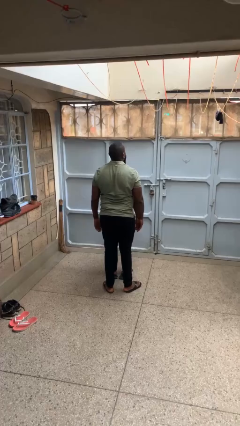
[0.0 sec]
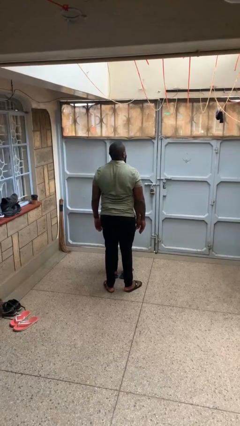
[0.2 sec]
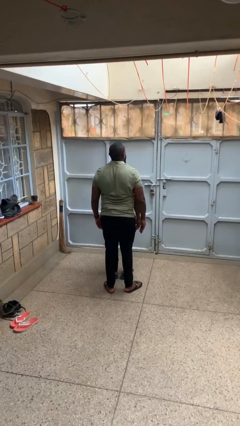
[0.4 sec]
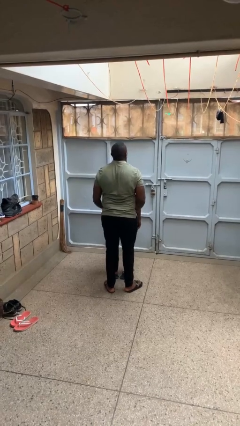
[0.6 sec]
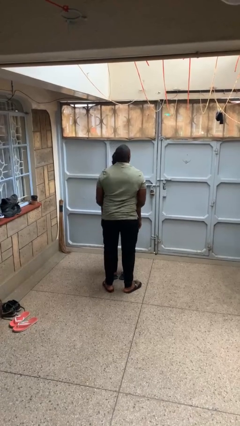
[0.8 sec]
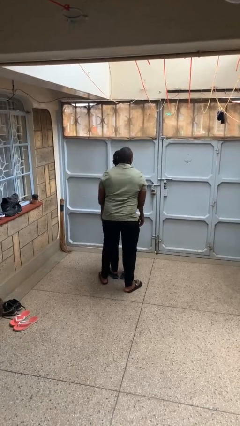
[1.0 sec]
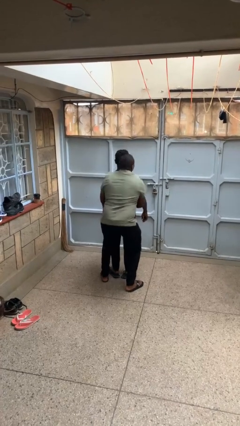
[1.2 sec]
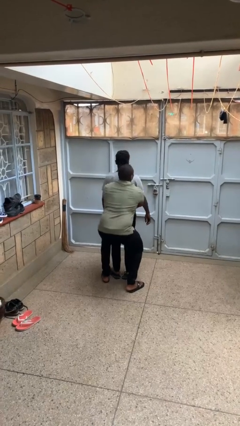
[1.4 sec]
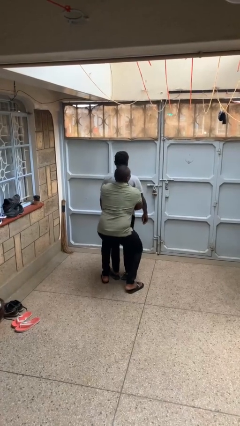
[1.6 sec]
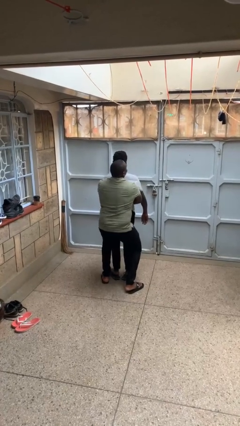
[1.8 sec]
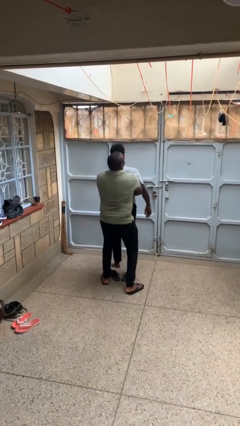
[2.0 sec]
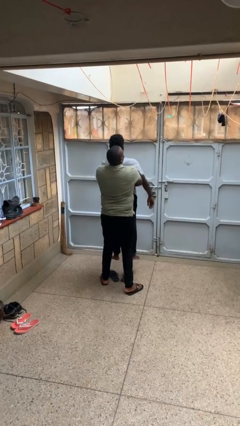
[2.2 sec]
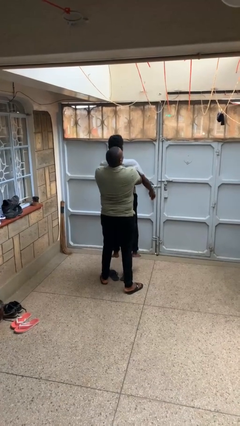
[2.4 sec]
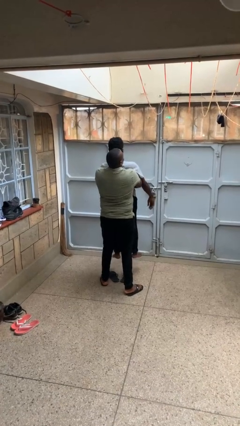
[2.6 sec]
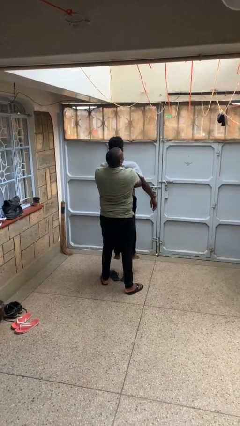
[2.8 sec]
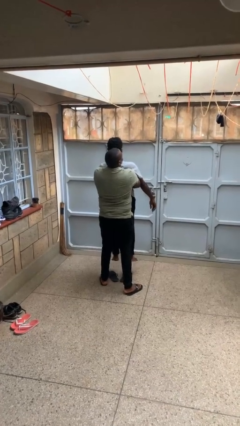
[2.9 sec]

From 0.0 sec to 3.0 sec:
person picks up person

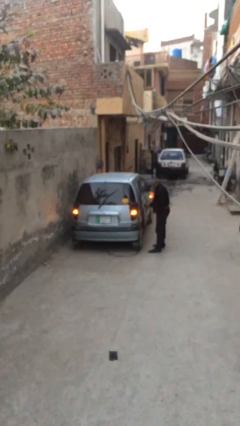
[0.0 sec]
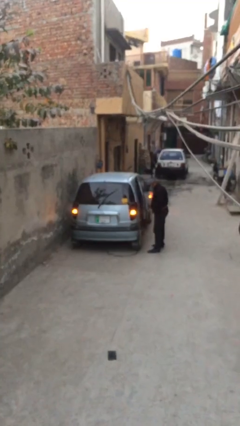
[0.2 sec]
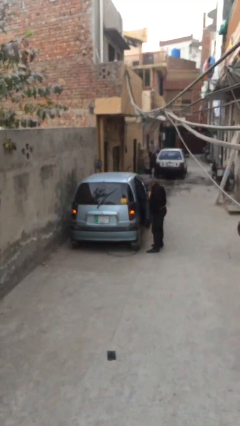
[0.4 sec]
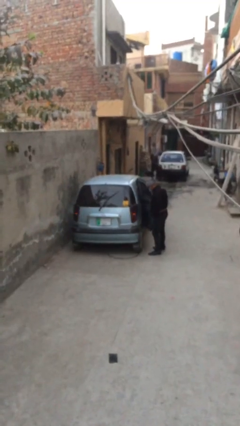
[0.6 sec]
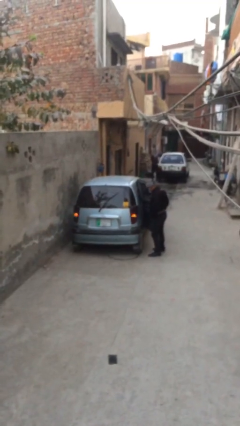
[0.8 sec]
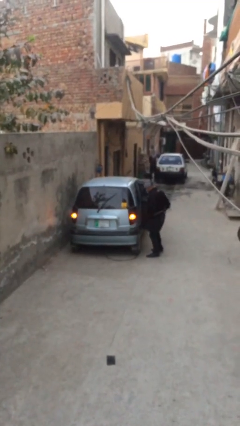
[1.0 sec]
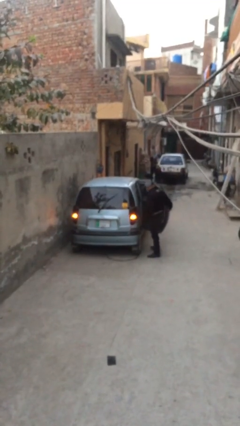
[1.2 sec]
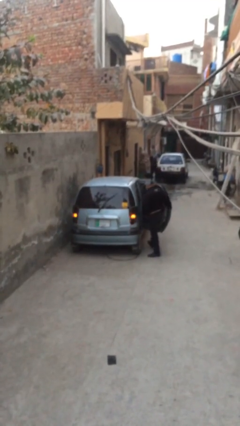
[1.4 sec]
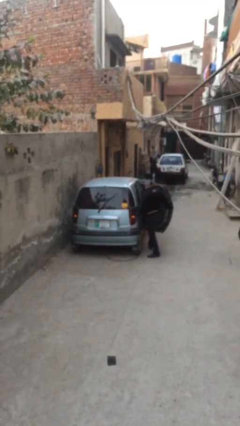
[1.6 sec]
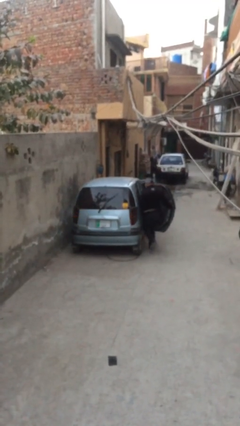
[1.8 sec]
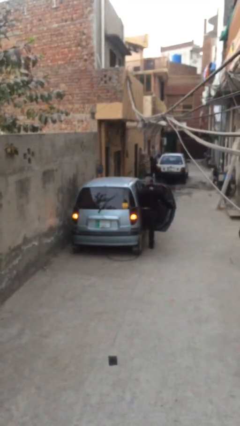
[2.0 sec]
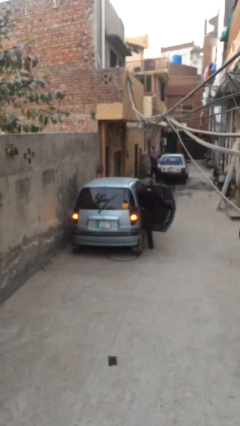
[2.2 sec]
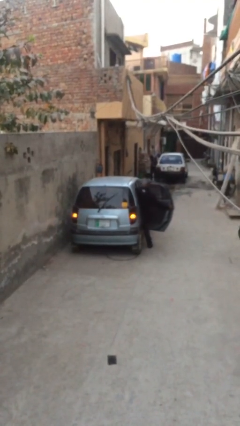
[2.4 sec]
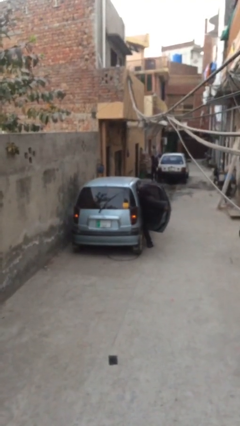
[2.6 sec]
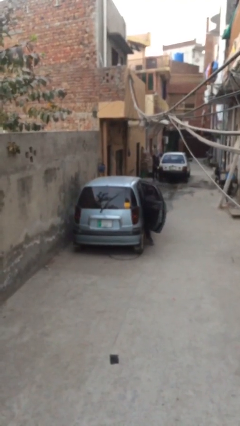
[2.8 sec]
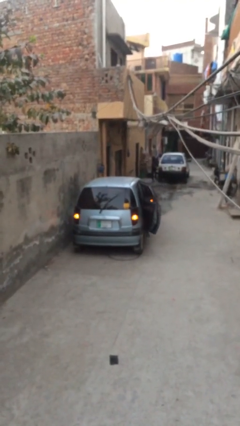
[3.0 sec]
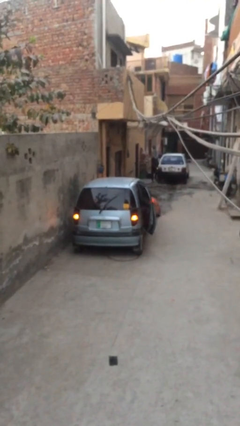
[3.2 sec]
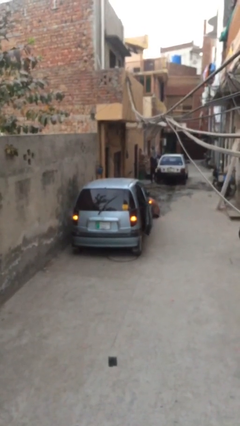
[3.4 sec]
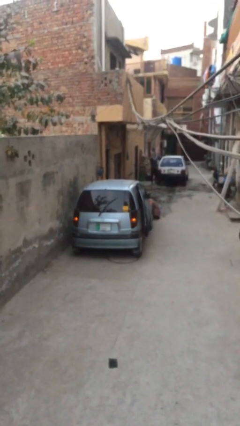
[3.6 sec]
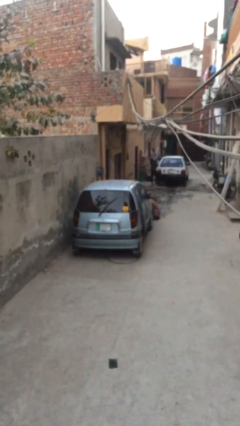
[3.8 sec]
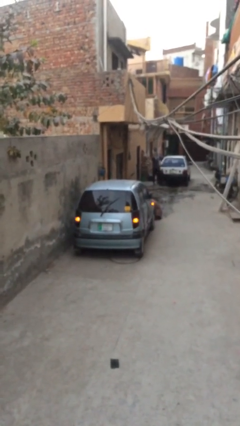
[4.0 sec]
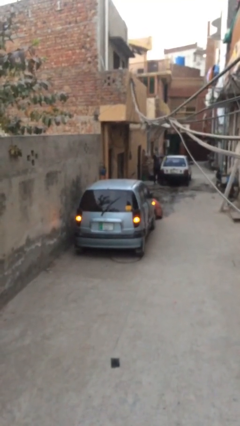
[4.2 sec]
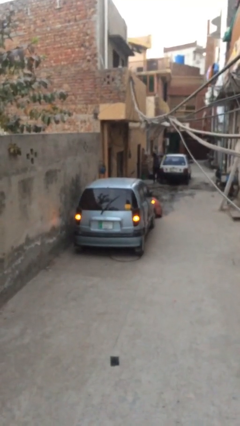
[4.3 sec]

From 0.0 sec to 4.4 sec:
car picks up person

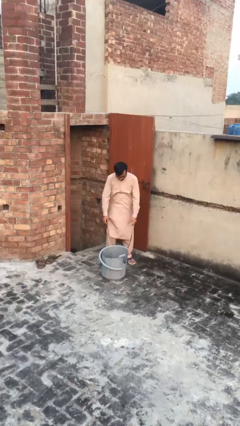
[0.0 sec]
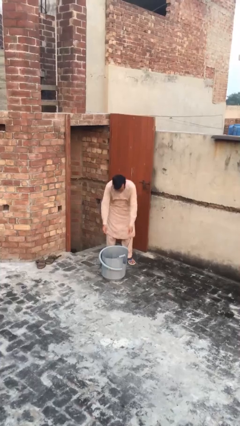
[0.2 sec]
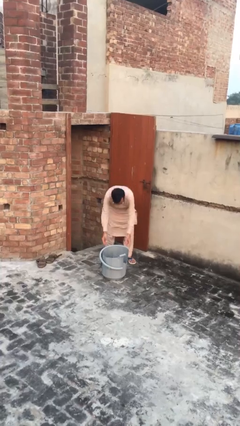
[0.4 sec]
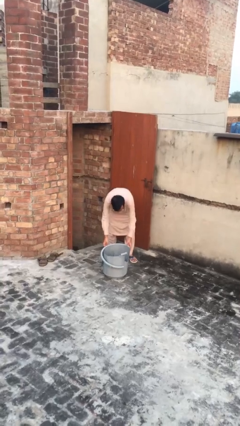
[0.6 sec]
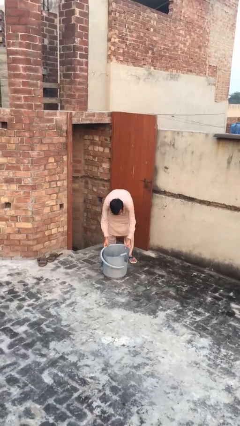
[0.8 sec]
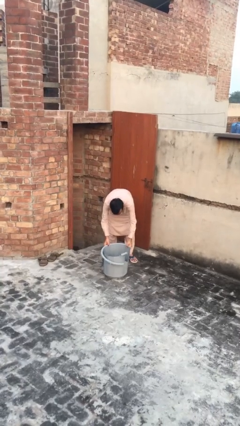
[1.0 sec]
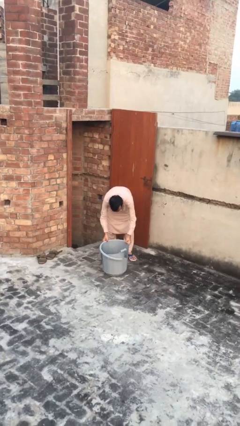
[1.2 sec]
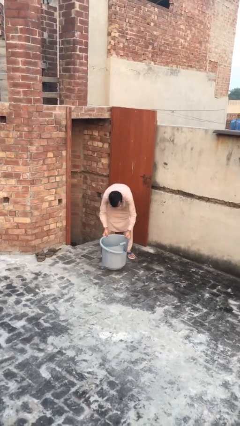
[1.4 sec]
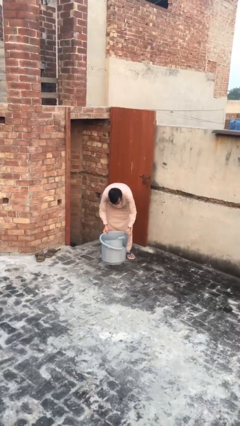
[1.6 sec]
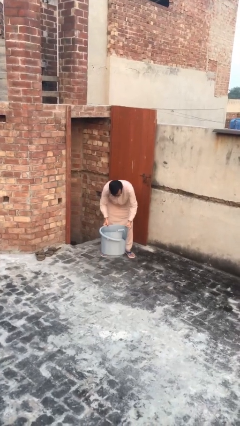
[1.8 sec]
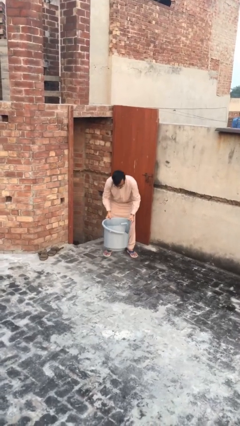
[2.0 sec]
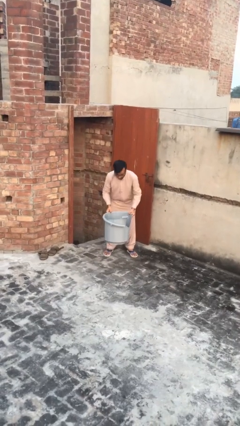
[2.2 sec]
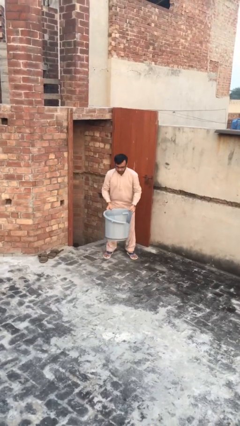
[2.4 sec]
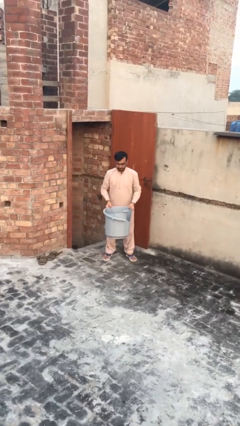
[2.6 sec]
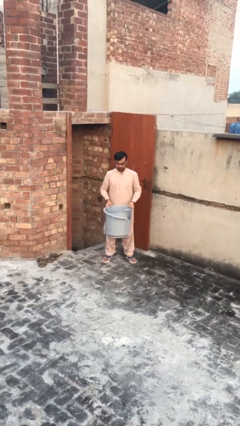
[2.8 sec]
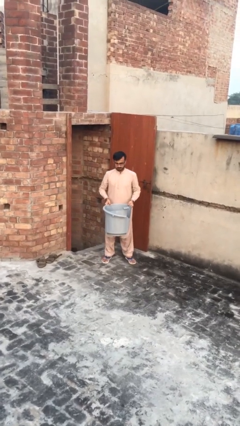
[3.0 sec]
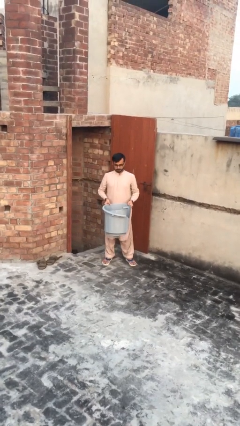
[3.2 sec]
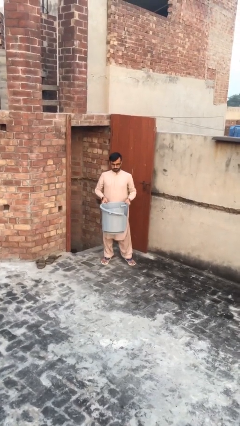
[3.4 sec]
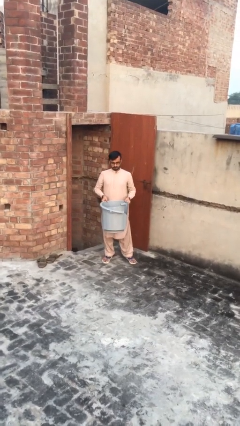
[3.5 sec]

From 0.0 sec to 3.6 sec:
person picks up object from floor

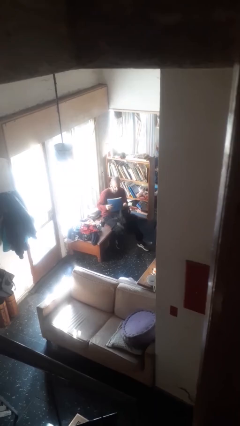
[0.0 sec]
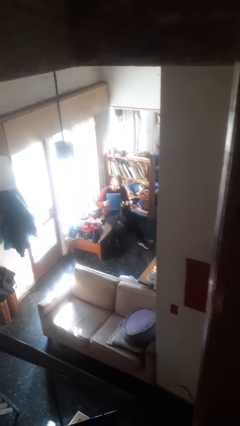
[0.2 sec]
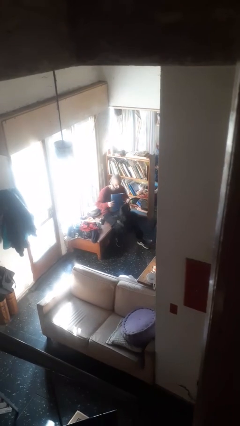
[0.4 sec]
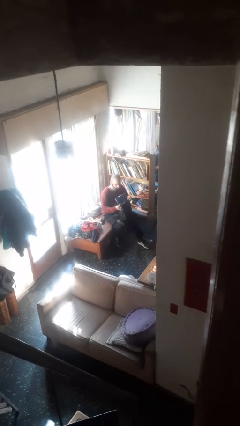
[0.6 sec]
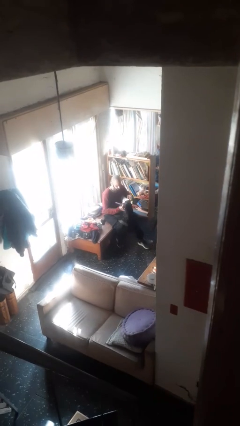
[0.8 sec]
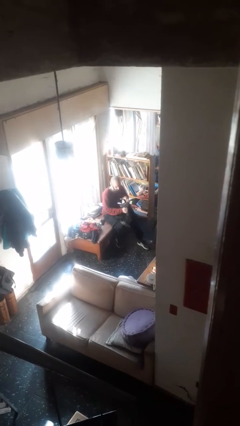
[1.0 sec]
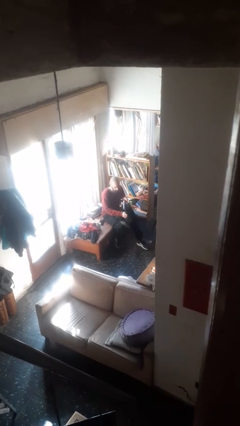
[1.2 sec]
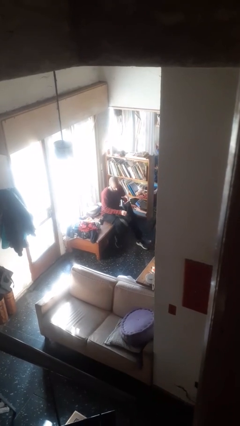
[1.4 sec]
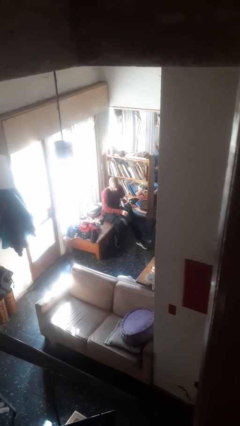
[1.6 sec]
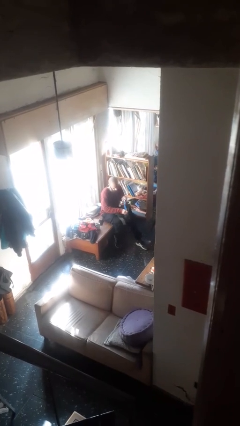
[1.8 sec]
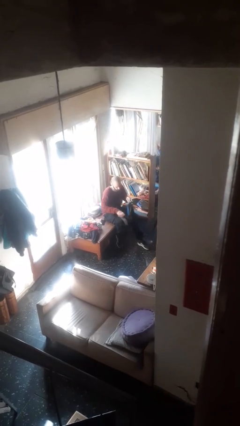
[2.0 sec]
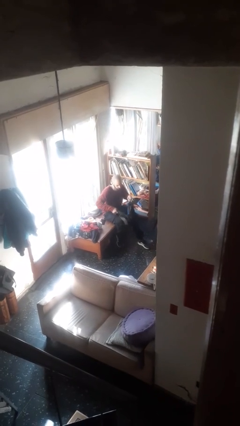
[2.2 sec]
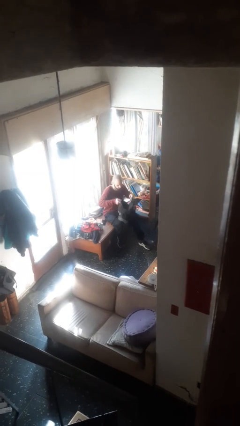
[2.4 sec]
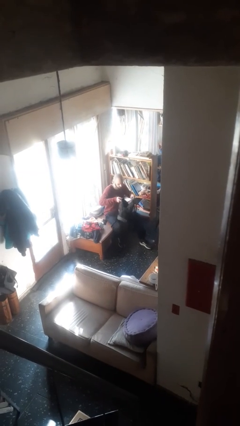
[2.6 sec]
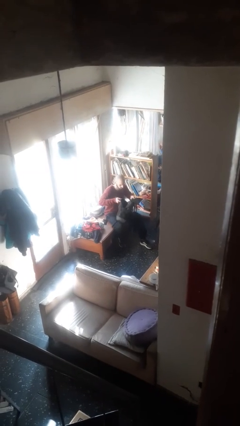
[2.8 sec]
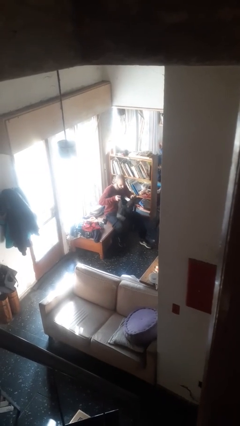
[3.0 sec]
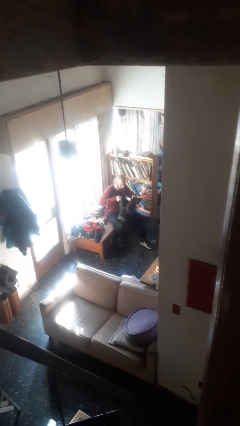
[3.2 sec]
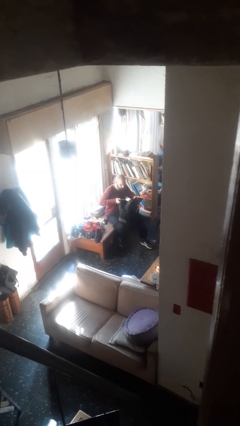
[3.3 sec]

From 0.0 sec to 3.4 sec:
person puts object into backpack

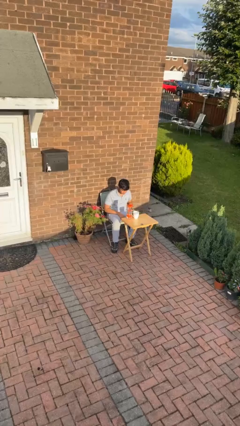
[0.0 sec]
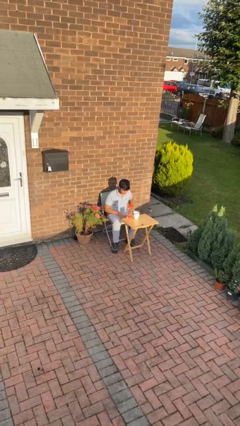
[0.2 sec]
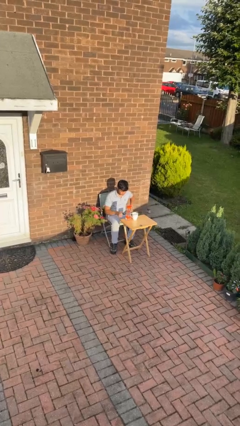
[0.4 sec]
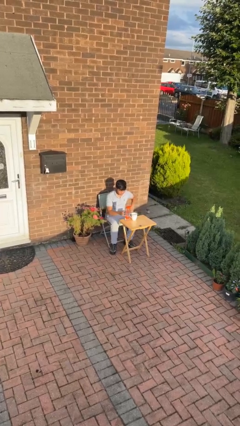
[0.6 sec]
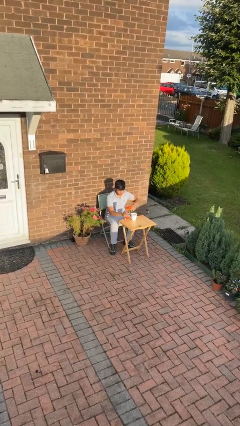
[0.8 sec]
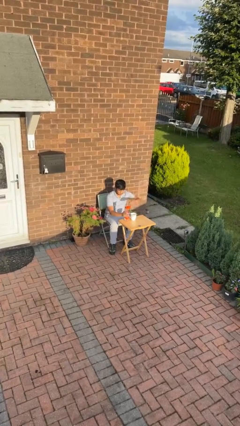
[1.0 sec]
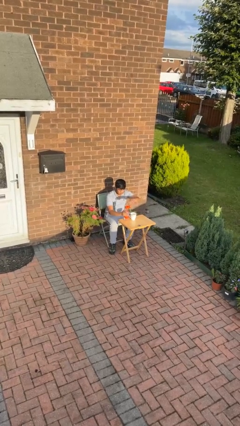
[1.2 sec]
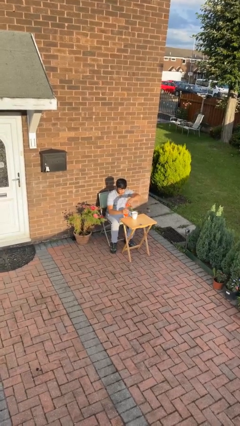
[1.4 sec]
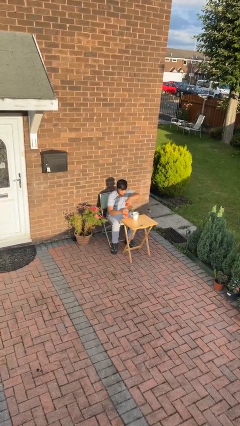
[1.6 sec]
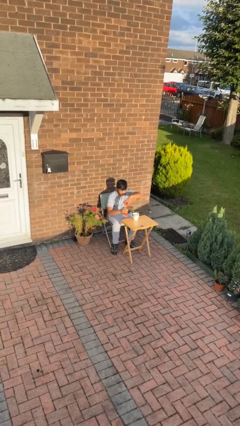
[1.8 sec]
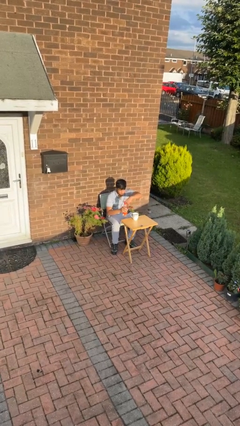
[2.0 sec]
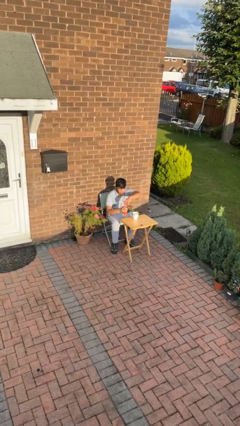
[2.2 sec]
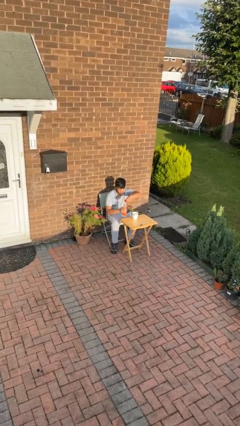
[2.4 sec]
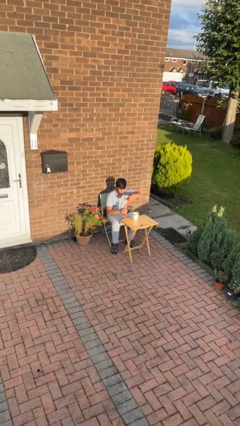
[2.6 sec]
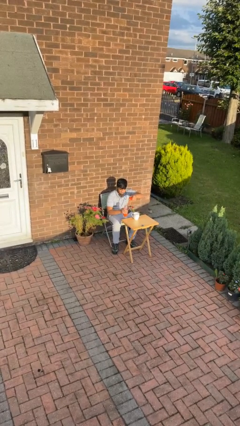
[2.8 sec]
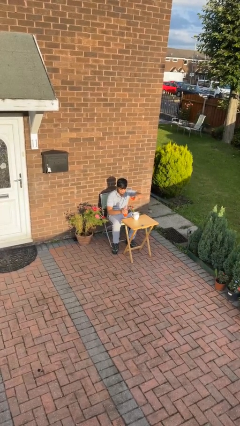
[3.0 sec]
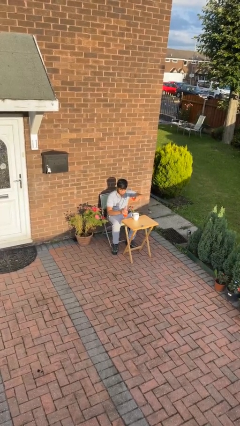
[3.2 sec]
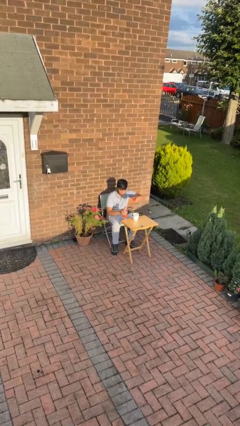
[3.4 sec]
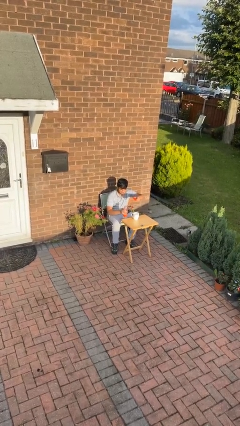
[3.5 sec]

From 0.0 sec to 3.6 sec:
person unscrews lid from bottle
